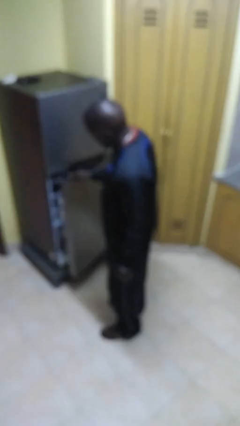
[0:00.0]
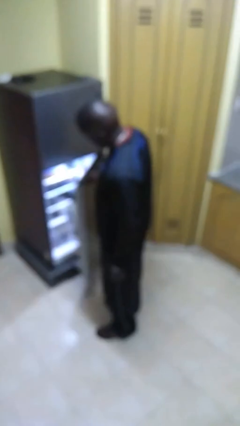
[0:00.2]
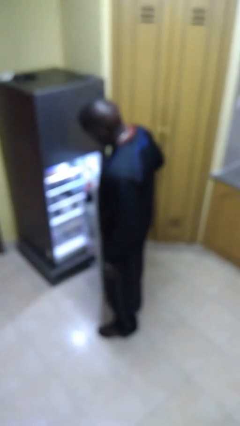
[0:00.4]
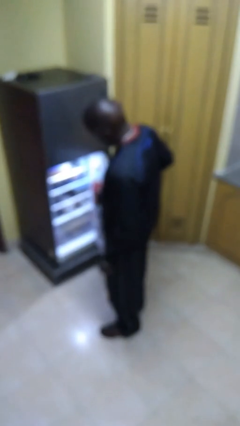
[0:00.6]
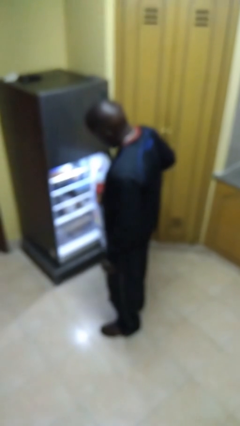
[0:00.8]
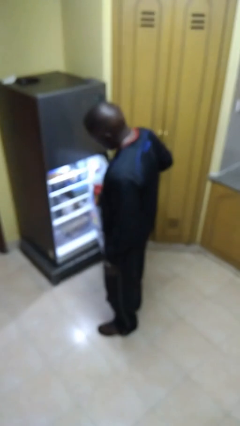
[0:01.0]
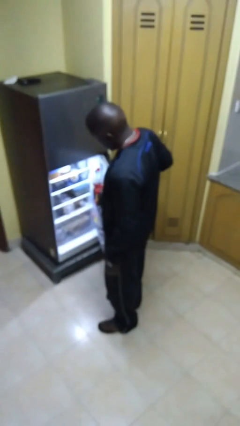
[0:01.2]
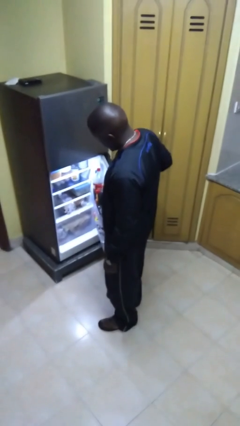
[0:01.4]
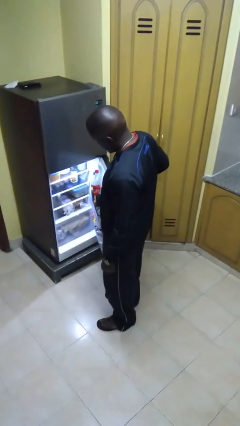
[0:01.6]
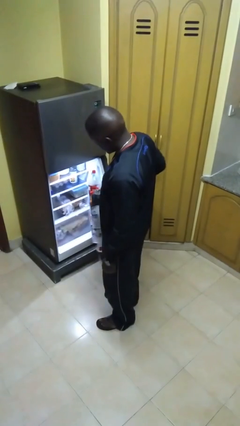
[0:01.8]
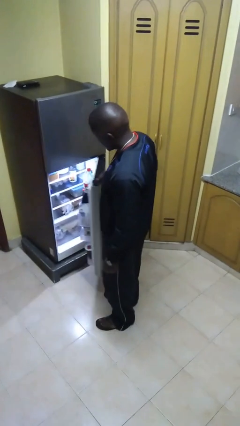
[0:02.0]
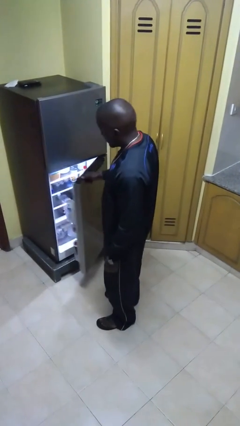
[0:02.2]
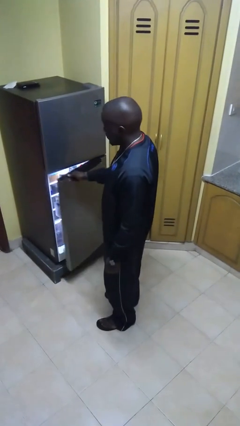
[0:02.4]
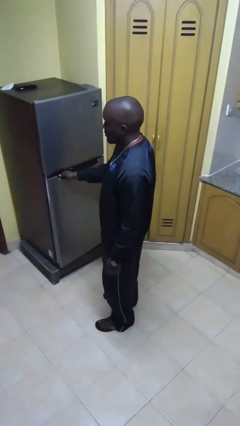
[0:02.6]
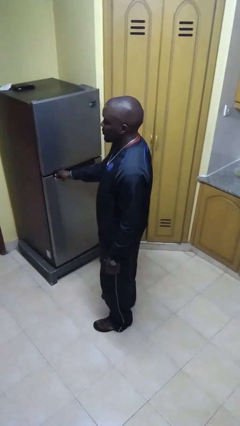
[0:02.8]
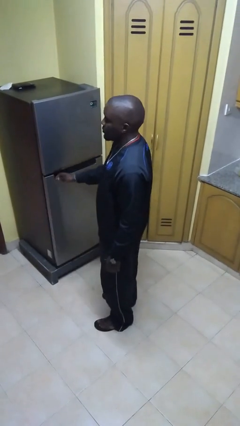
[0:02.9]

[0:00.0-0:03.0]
person washes hands

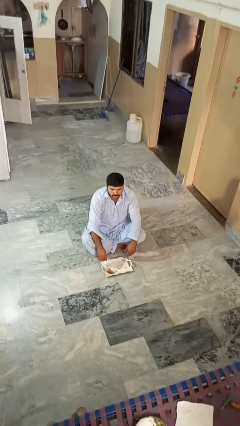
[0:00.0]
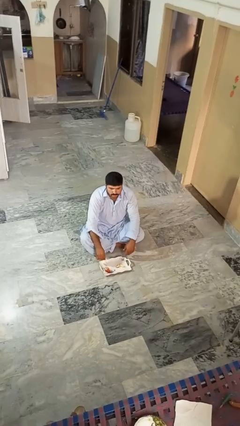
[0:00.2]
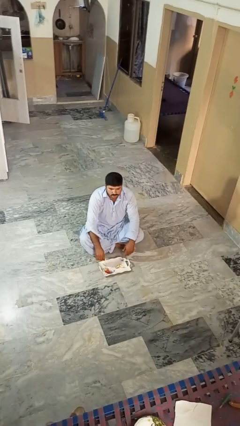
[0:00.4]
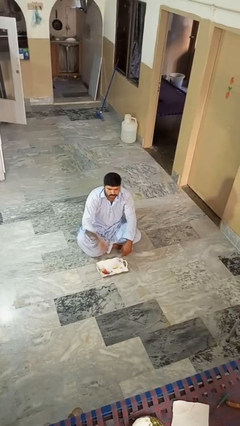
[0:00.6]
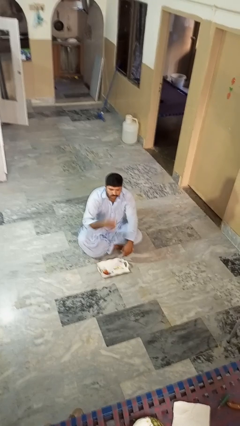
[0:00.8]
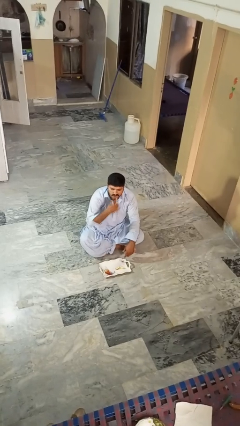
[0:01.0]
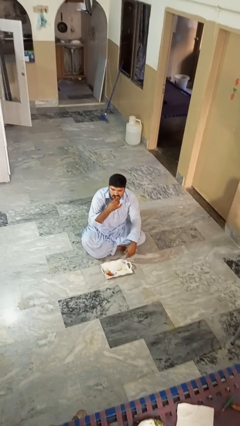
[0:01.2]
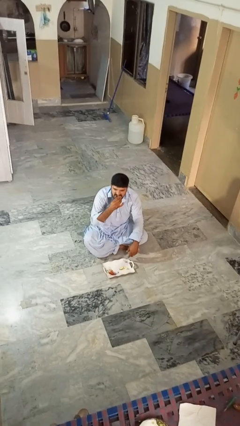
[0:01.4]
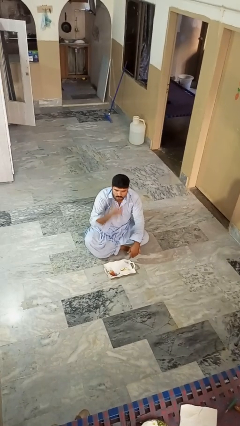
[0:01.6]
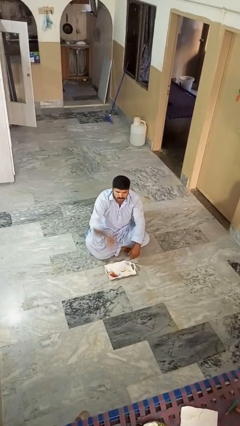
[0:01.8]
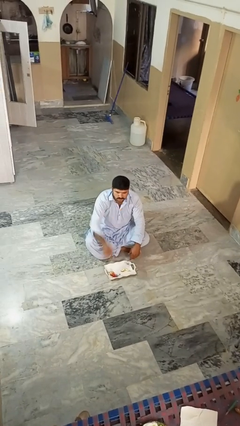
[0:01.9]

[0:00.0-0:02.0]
person eats apple

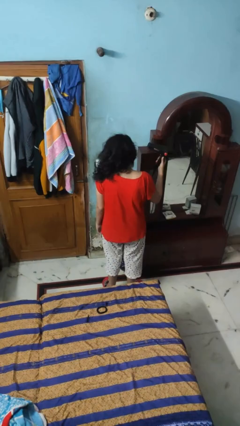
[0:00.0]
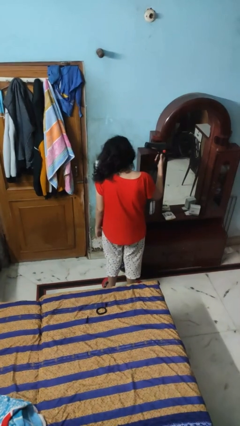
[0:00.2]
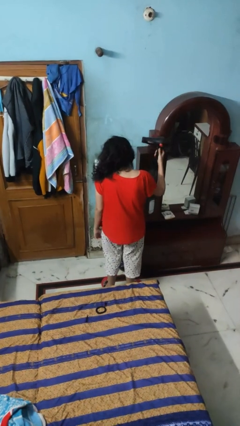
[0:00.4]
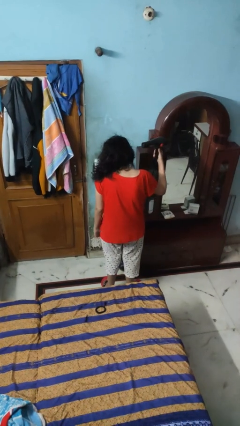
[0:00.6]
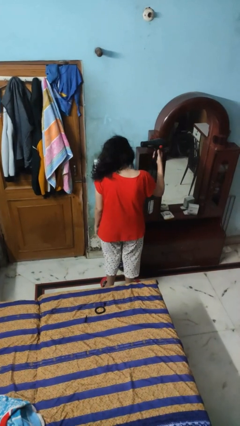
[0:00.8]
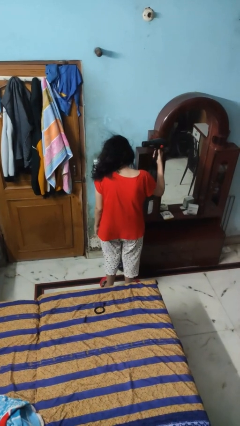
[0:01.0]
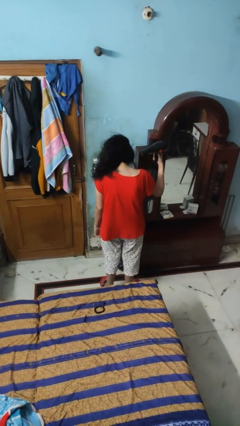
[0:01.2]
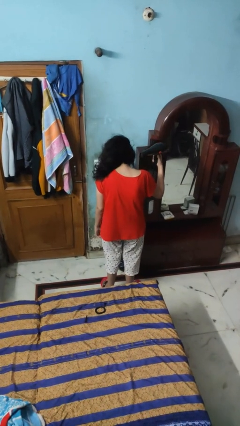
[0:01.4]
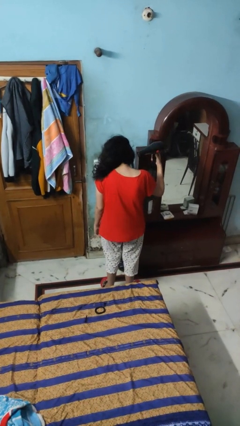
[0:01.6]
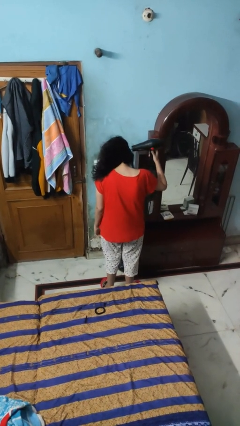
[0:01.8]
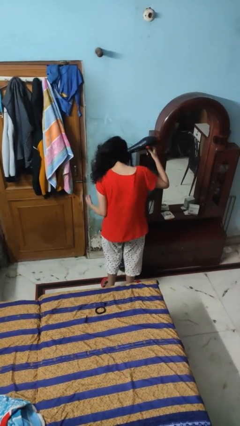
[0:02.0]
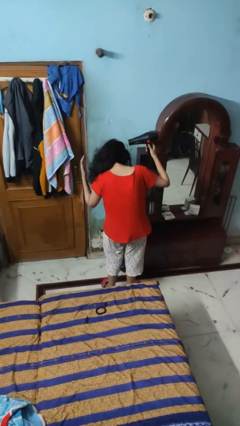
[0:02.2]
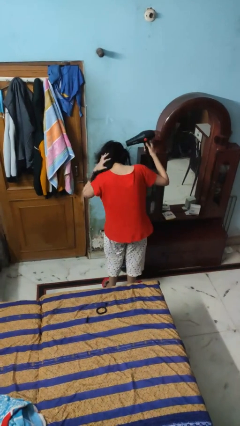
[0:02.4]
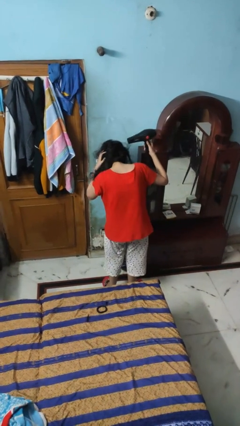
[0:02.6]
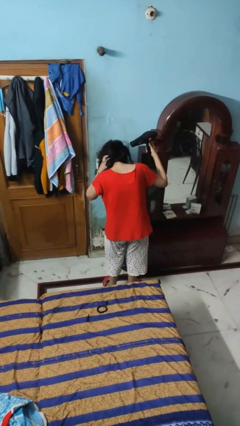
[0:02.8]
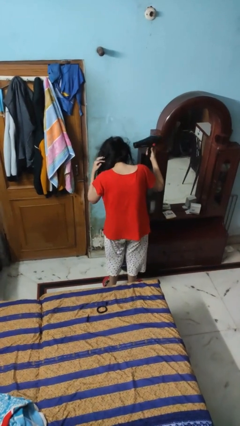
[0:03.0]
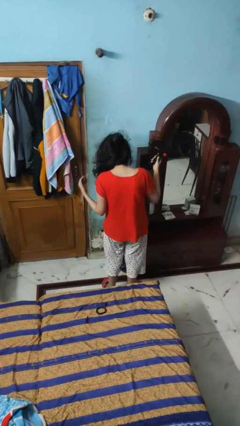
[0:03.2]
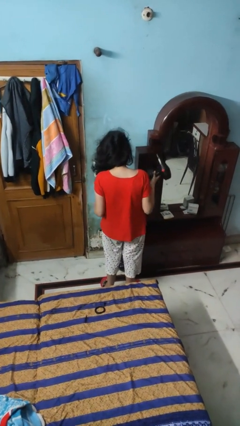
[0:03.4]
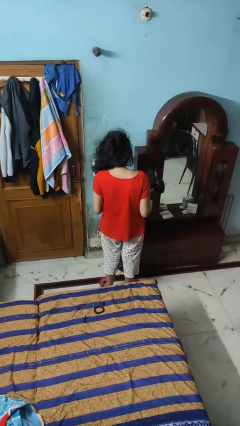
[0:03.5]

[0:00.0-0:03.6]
person dries hair with hairdryer

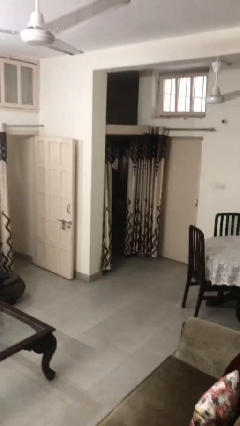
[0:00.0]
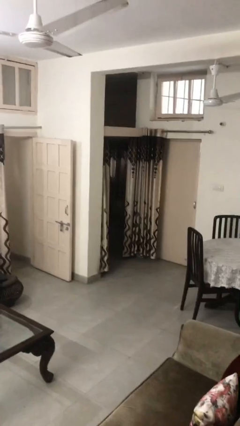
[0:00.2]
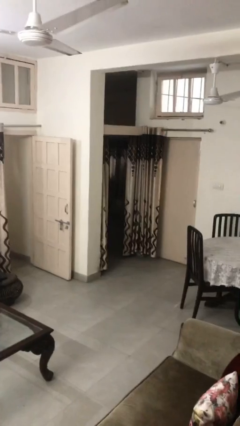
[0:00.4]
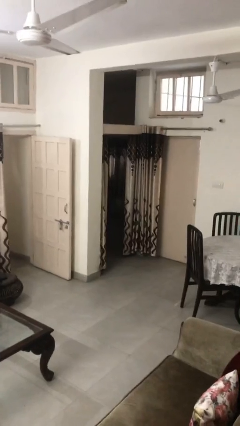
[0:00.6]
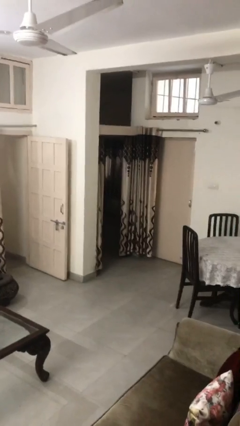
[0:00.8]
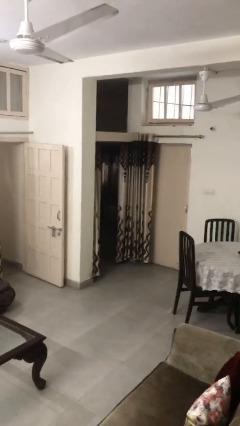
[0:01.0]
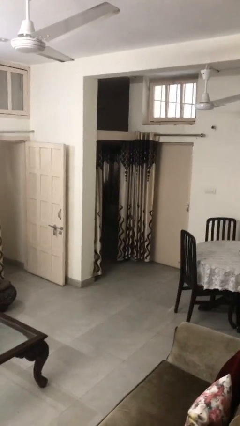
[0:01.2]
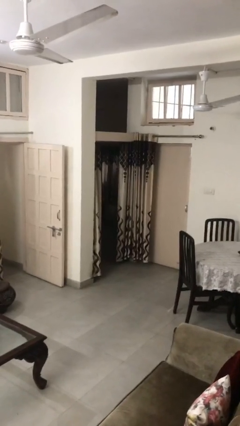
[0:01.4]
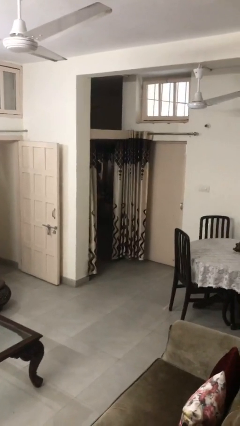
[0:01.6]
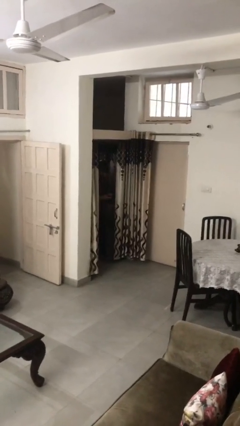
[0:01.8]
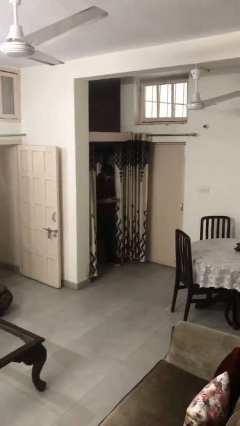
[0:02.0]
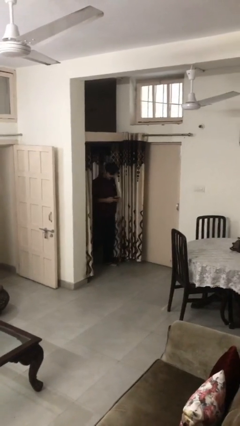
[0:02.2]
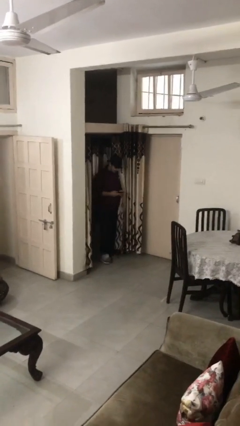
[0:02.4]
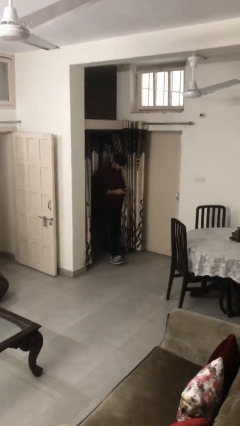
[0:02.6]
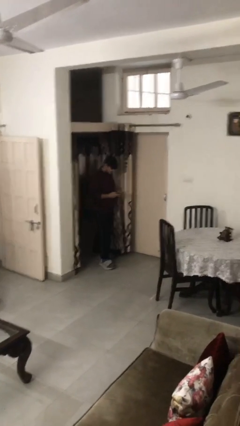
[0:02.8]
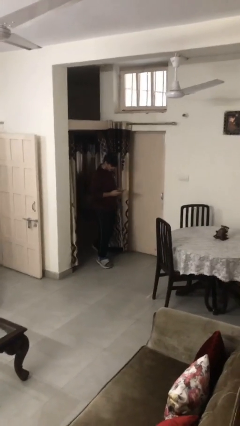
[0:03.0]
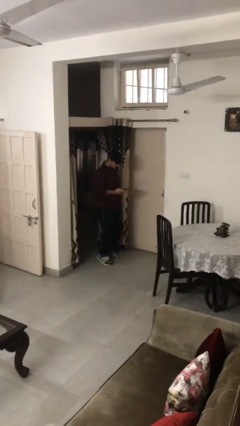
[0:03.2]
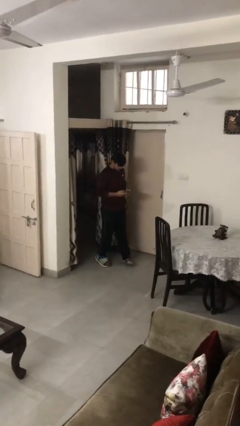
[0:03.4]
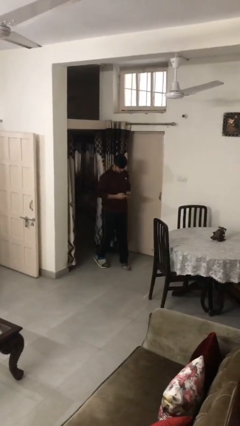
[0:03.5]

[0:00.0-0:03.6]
person enters scene through structure

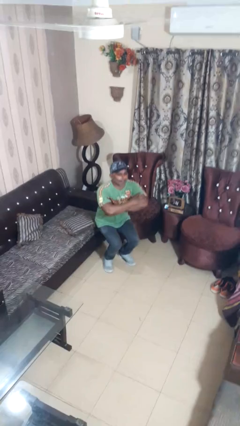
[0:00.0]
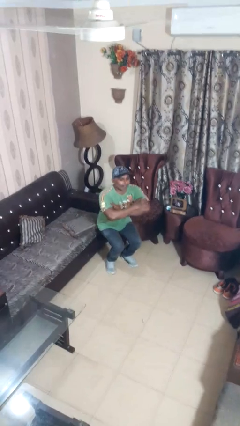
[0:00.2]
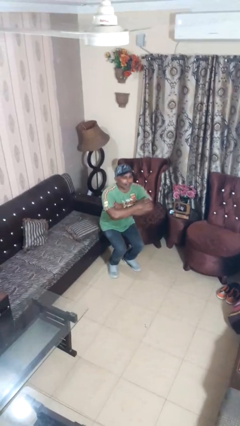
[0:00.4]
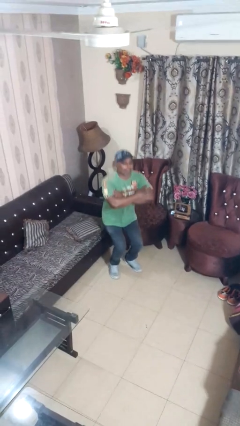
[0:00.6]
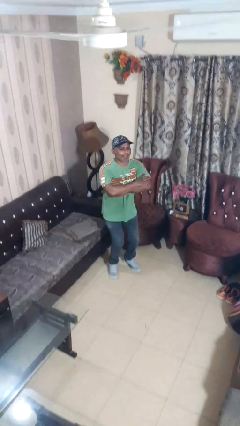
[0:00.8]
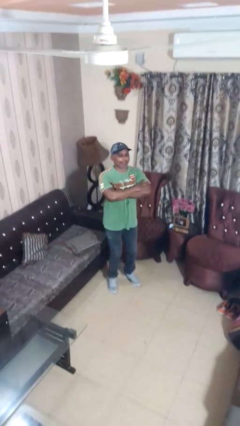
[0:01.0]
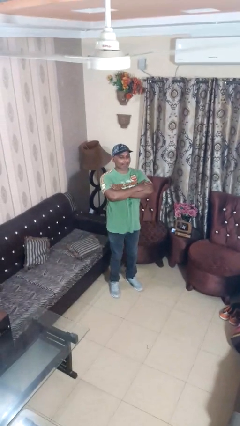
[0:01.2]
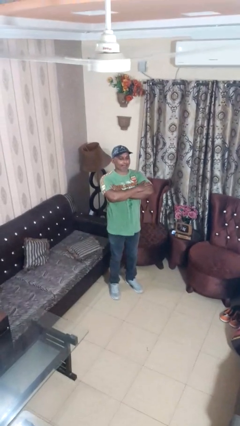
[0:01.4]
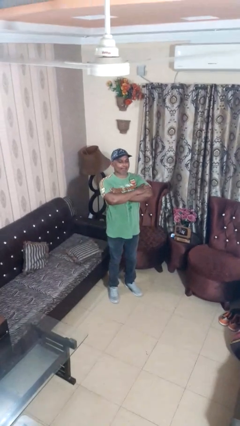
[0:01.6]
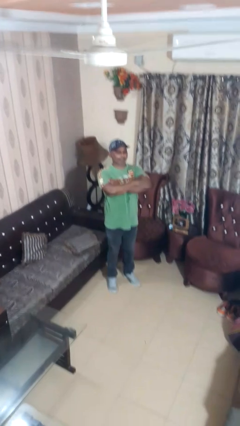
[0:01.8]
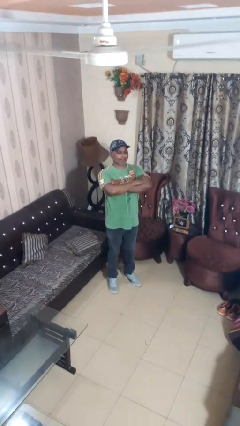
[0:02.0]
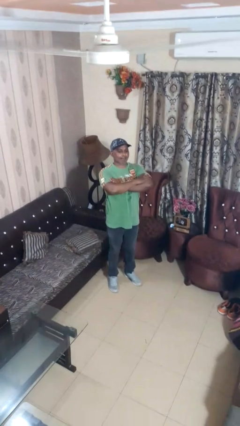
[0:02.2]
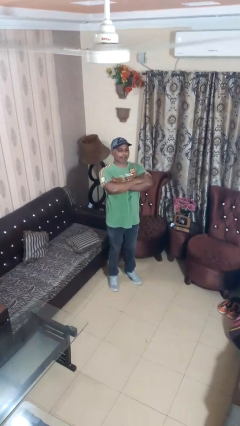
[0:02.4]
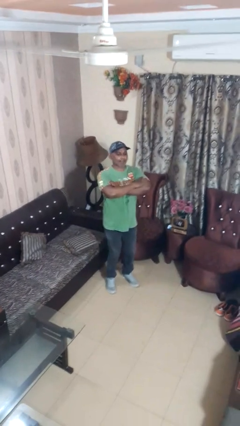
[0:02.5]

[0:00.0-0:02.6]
person stands up

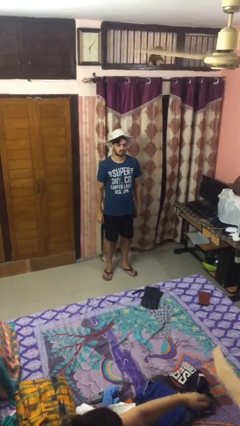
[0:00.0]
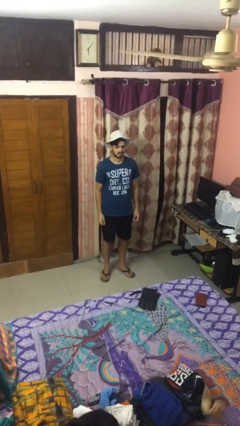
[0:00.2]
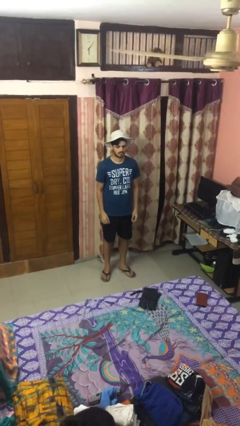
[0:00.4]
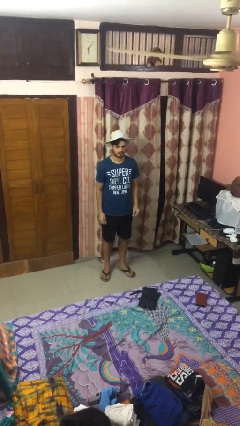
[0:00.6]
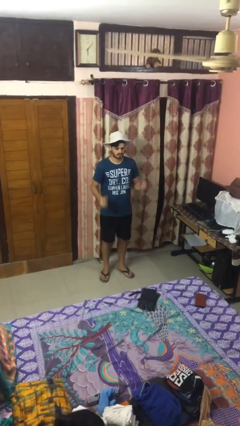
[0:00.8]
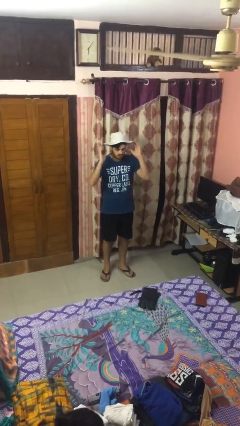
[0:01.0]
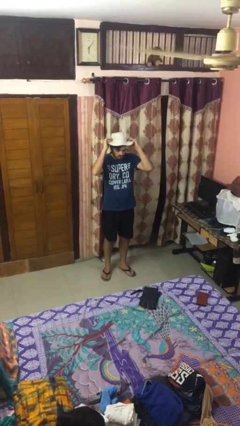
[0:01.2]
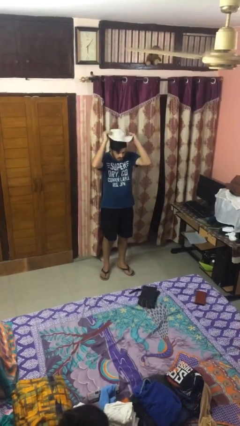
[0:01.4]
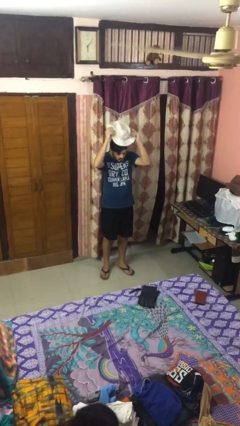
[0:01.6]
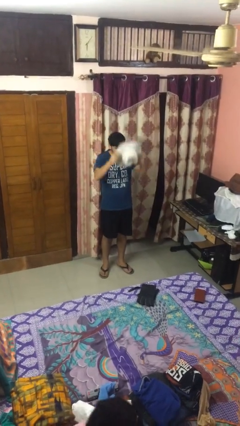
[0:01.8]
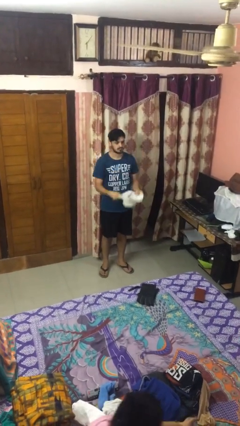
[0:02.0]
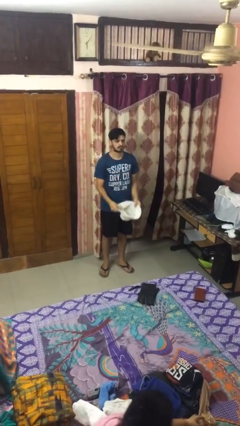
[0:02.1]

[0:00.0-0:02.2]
person takes off hat

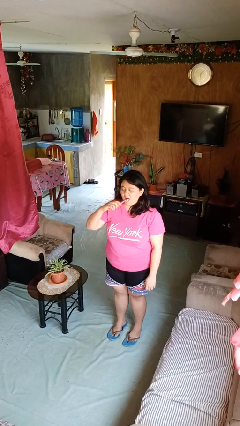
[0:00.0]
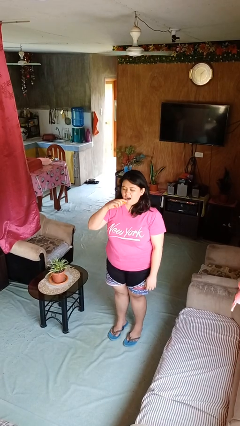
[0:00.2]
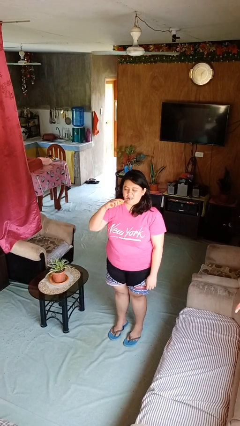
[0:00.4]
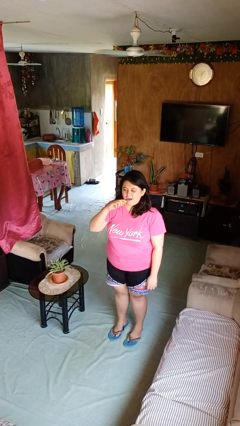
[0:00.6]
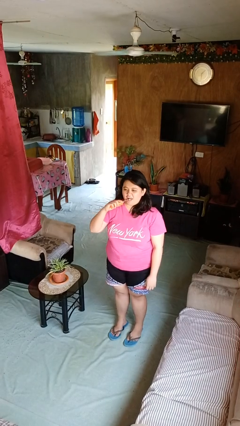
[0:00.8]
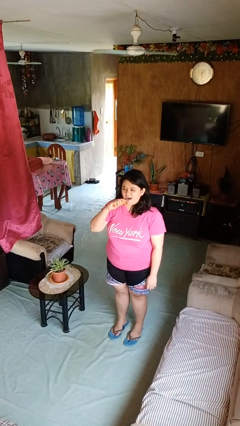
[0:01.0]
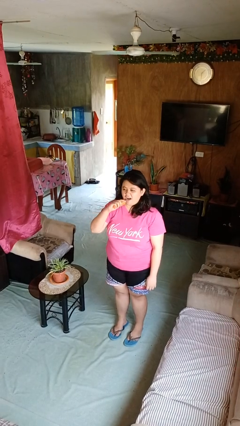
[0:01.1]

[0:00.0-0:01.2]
person brushes teeth
